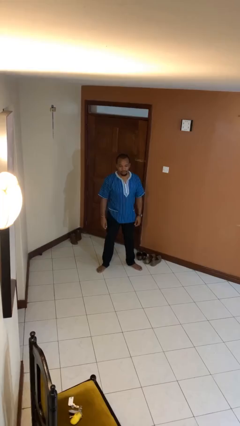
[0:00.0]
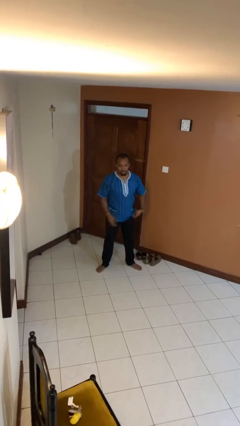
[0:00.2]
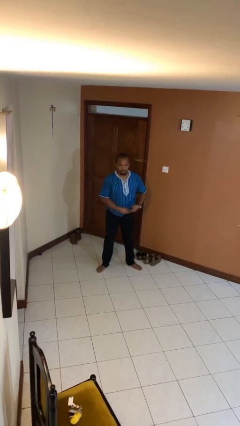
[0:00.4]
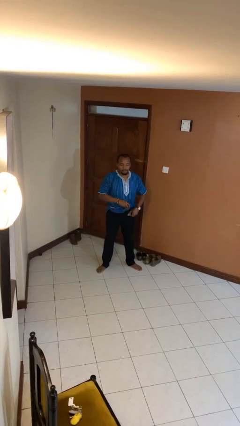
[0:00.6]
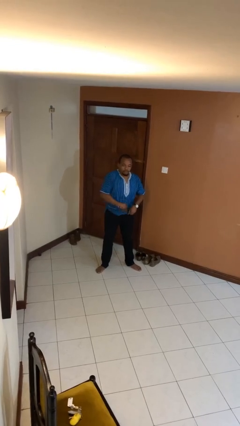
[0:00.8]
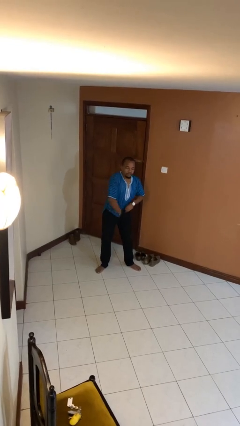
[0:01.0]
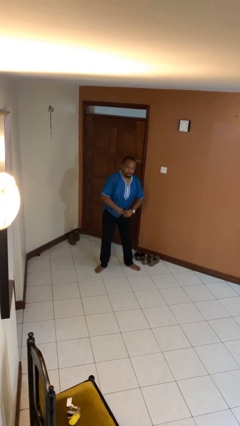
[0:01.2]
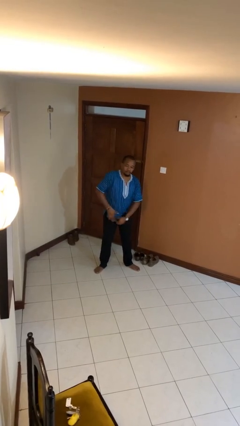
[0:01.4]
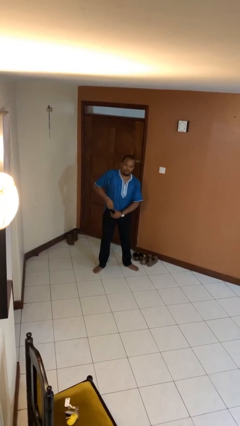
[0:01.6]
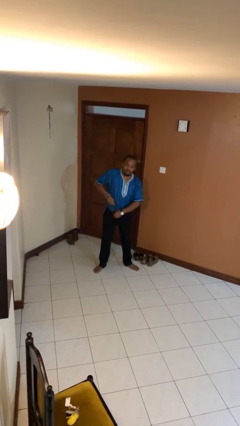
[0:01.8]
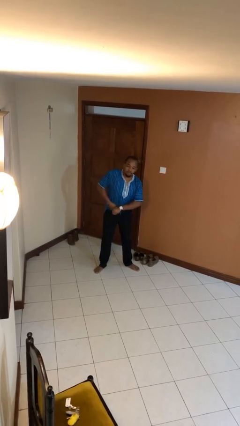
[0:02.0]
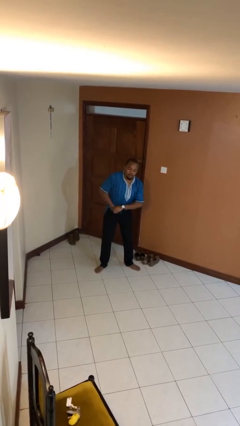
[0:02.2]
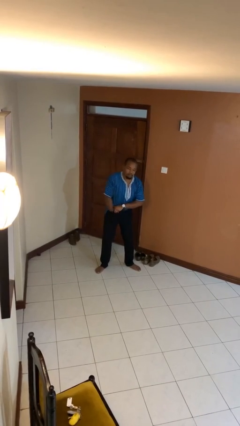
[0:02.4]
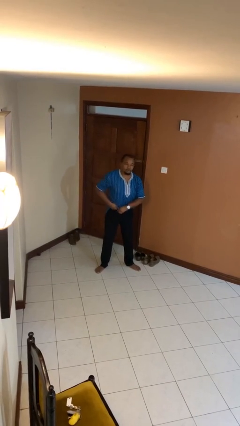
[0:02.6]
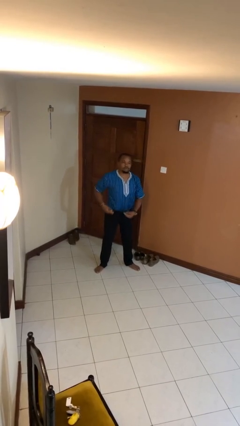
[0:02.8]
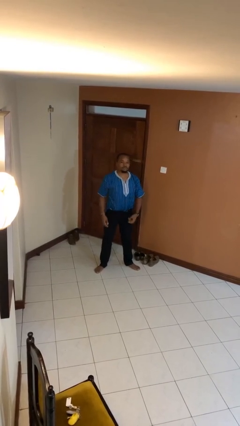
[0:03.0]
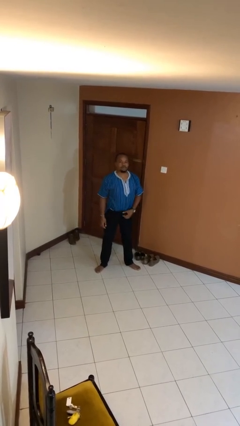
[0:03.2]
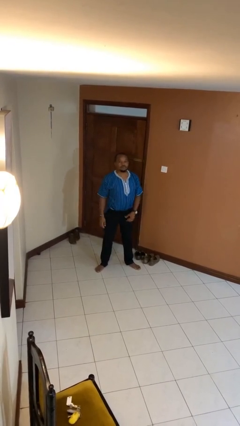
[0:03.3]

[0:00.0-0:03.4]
person tucks in shirt

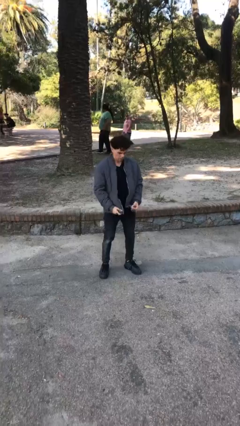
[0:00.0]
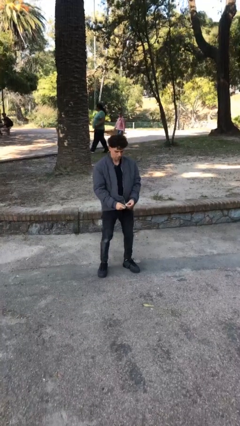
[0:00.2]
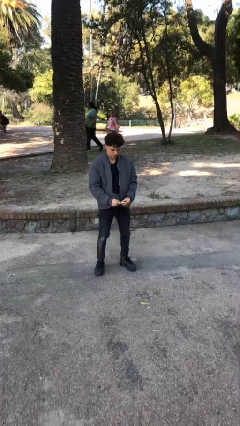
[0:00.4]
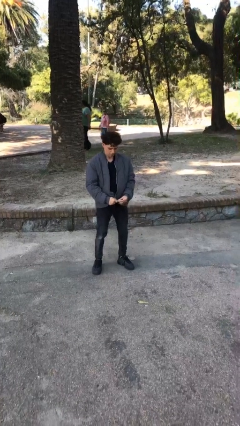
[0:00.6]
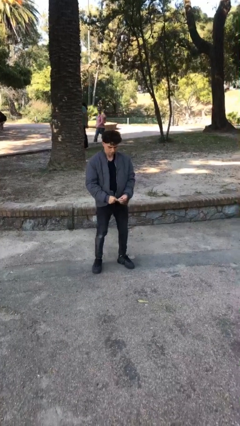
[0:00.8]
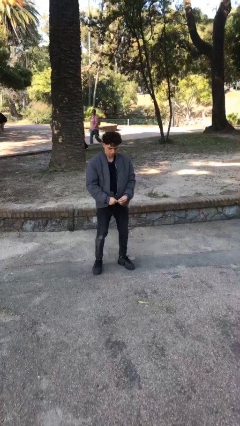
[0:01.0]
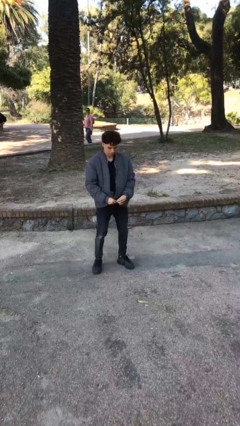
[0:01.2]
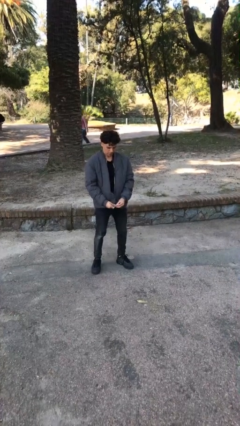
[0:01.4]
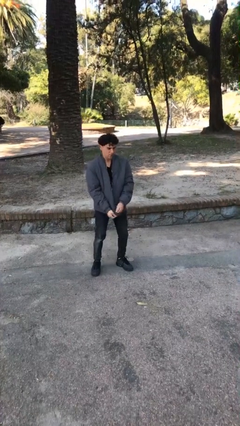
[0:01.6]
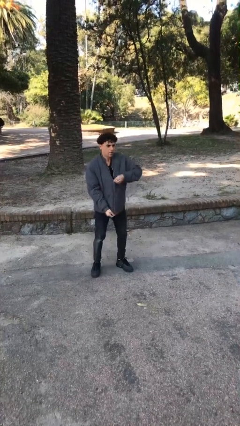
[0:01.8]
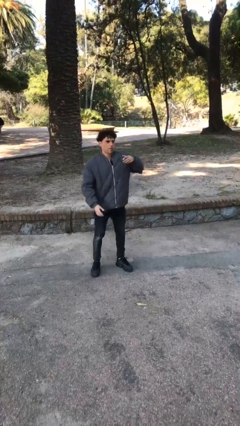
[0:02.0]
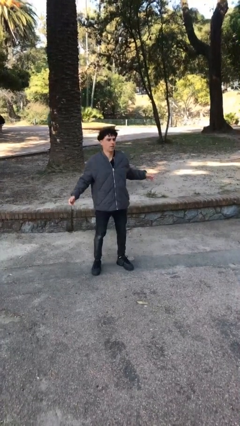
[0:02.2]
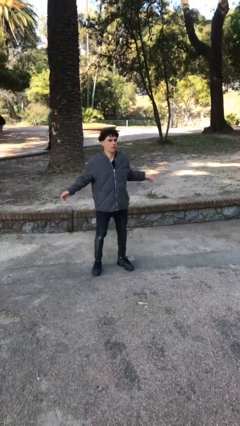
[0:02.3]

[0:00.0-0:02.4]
person zips up jacket

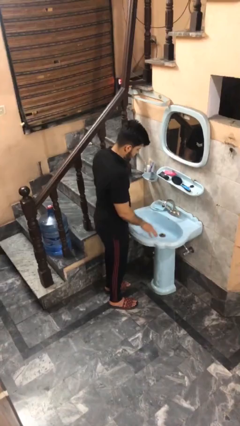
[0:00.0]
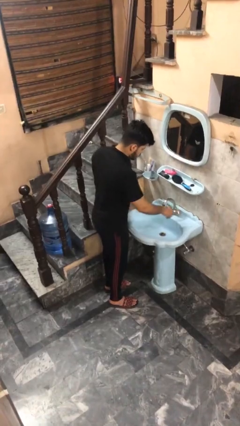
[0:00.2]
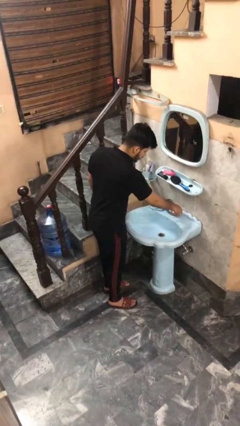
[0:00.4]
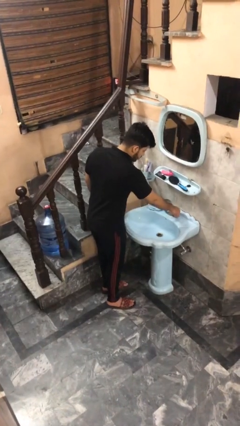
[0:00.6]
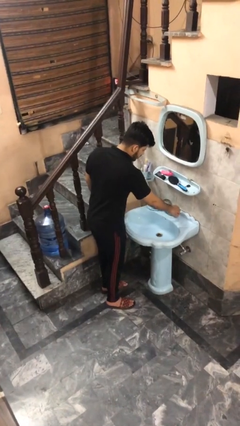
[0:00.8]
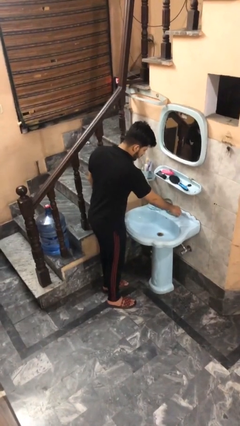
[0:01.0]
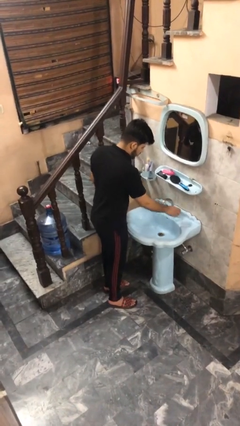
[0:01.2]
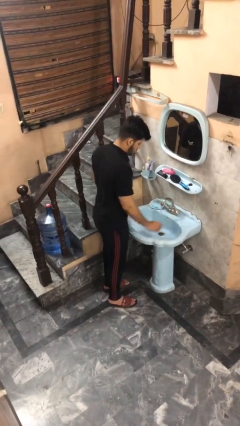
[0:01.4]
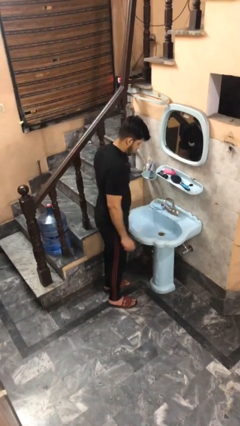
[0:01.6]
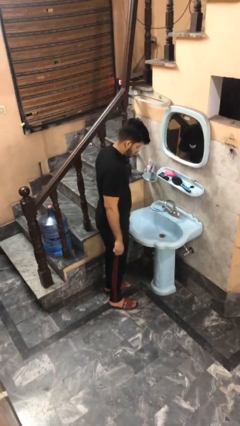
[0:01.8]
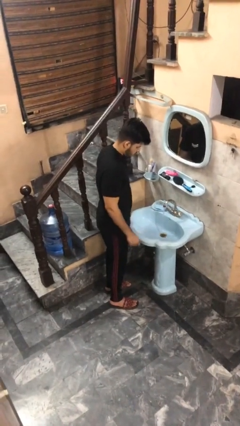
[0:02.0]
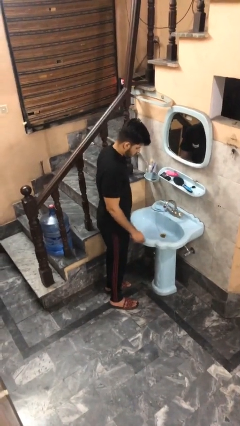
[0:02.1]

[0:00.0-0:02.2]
person turns on faucet

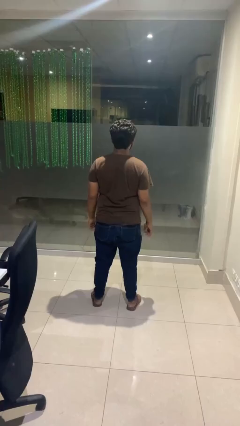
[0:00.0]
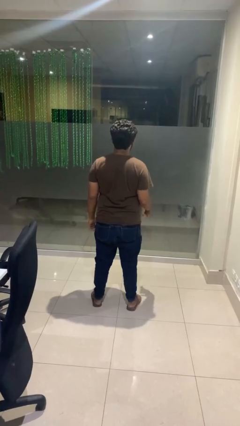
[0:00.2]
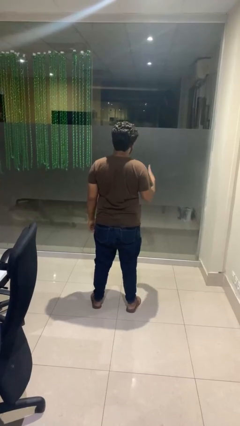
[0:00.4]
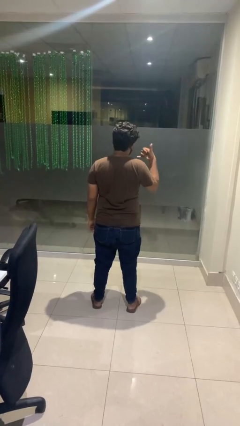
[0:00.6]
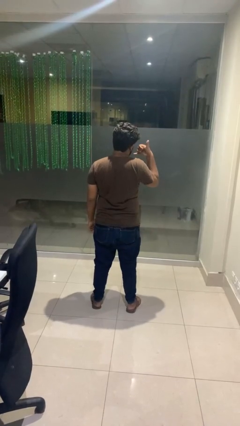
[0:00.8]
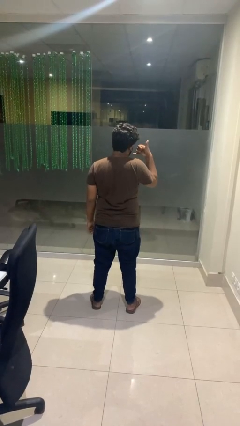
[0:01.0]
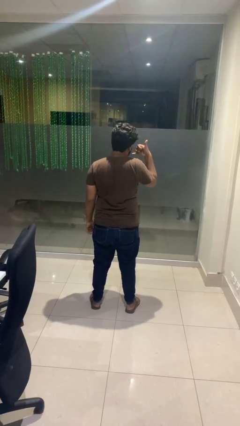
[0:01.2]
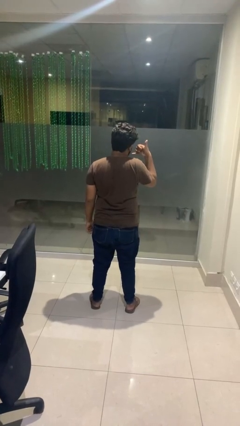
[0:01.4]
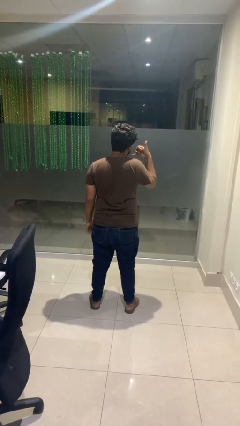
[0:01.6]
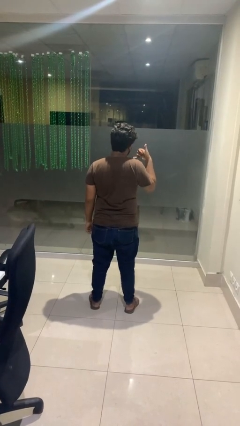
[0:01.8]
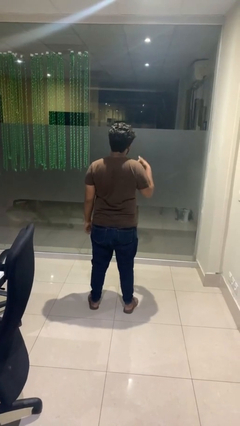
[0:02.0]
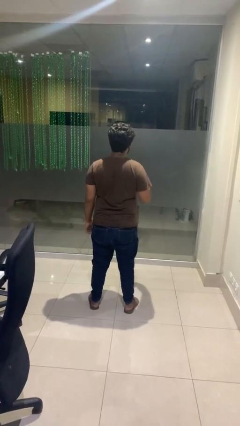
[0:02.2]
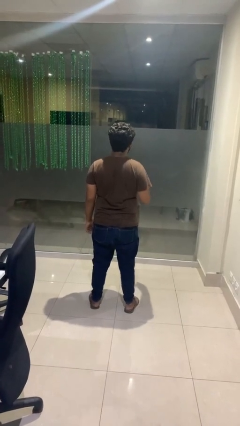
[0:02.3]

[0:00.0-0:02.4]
person gestures call me

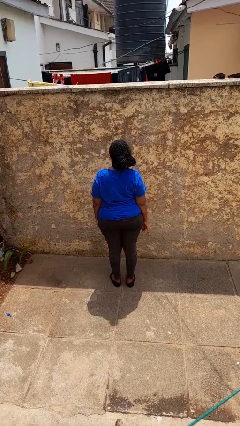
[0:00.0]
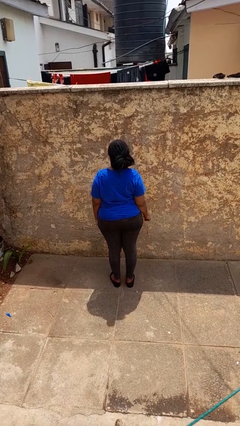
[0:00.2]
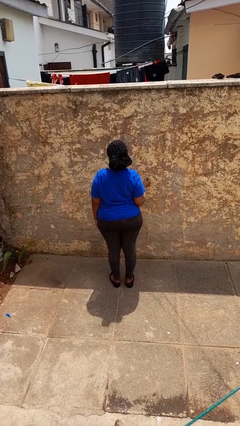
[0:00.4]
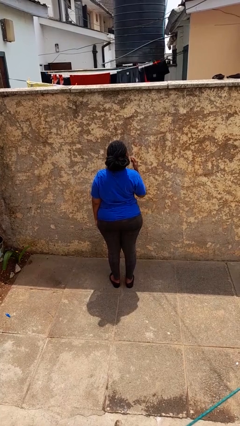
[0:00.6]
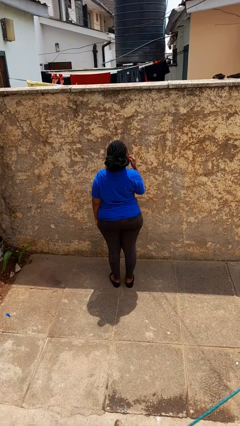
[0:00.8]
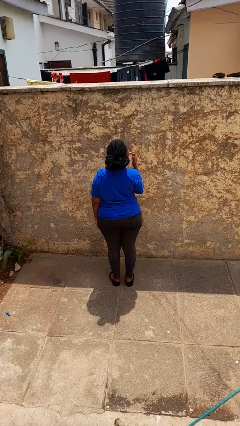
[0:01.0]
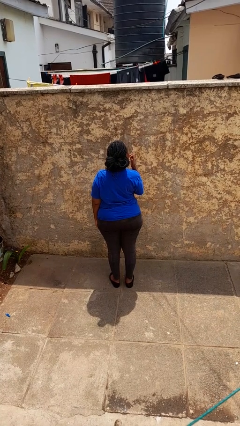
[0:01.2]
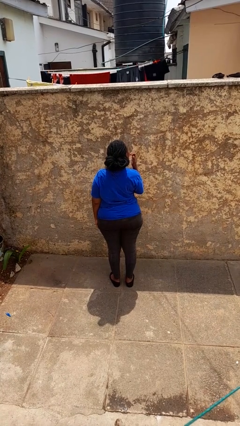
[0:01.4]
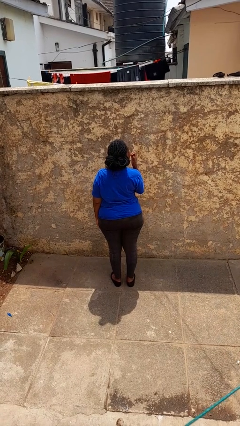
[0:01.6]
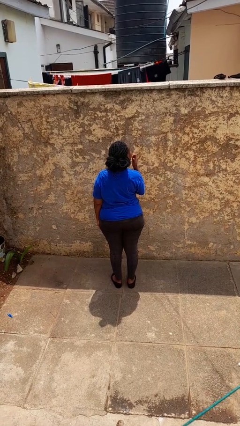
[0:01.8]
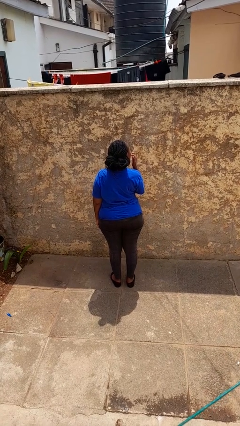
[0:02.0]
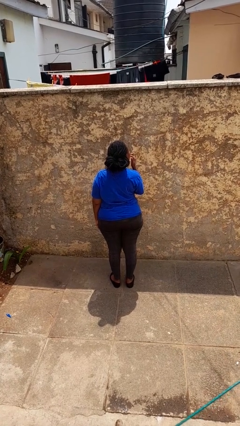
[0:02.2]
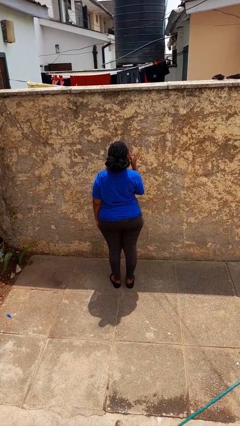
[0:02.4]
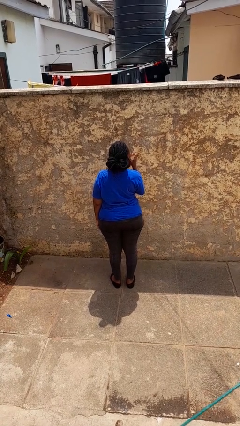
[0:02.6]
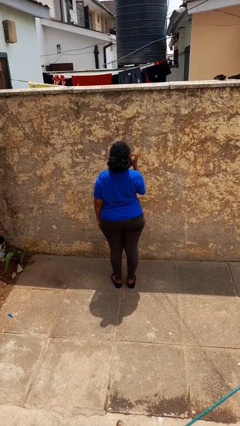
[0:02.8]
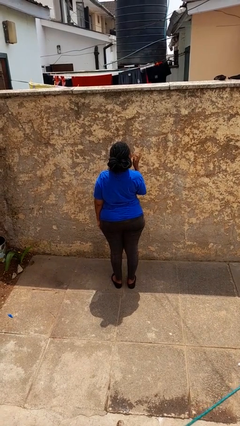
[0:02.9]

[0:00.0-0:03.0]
person licks fingers

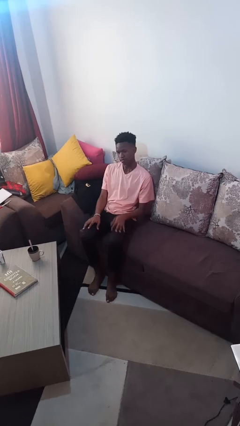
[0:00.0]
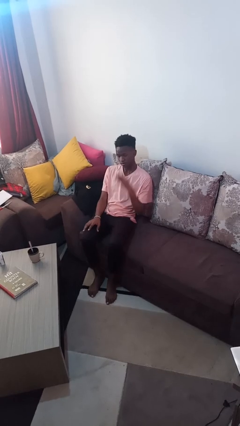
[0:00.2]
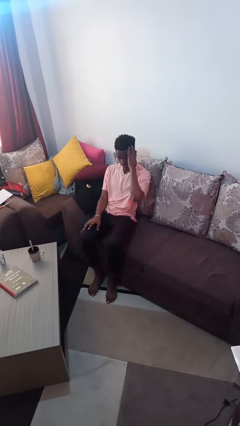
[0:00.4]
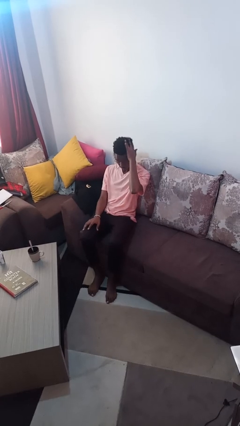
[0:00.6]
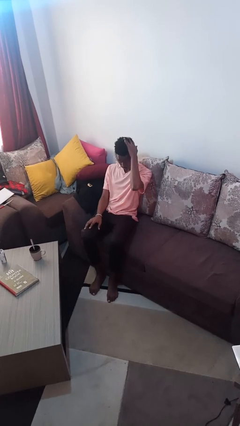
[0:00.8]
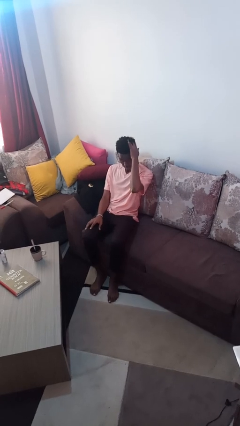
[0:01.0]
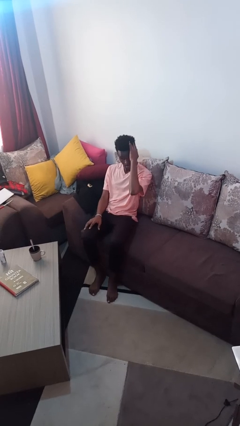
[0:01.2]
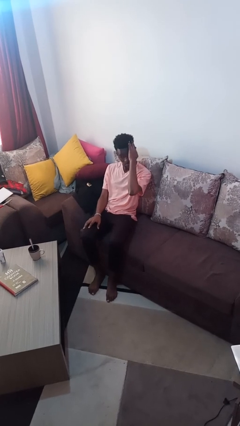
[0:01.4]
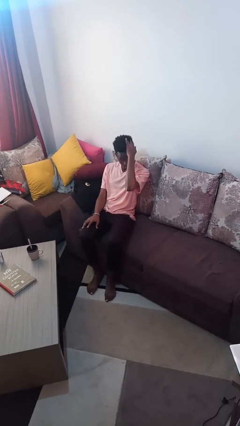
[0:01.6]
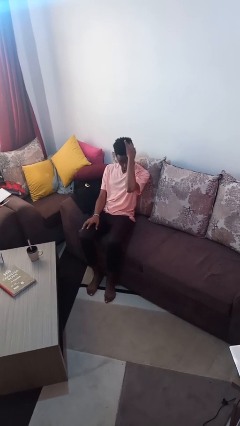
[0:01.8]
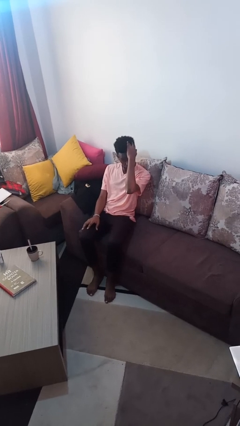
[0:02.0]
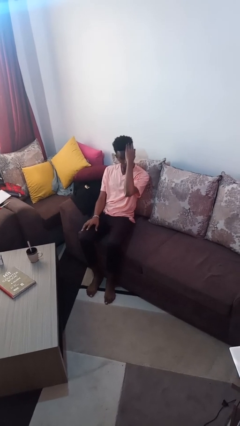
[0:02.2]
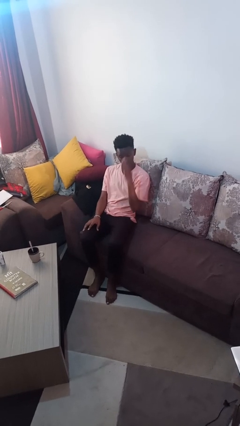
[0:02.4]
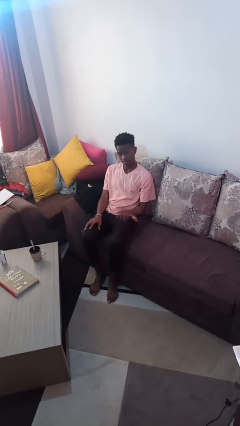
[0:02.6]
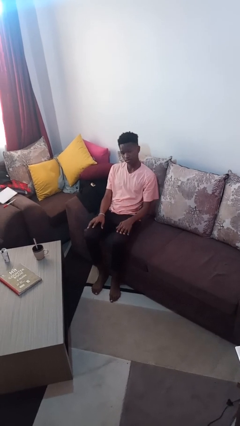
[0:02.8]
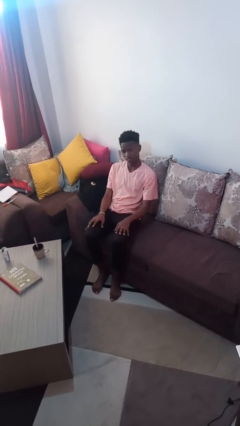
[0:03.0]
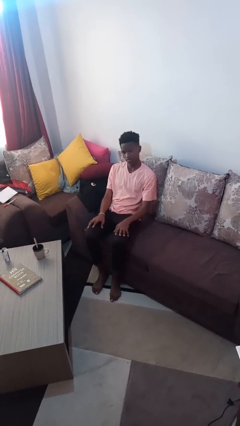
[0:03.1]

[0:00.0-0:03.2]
person strokes hair

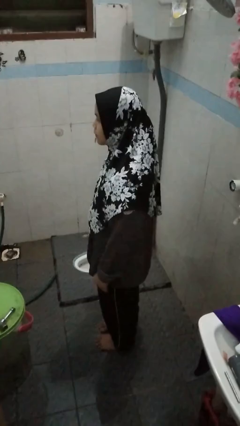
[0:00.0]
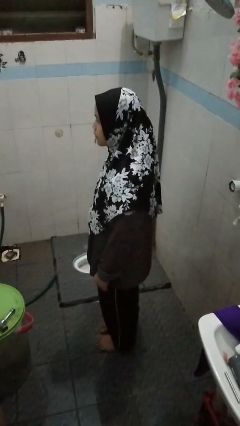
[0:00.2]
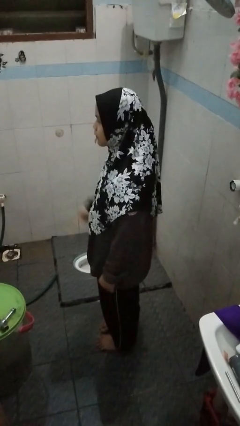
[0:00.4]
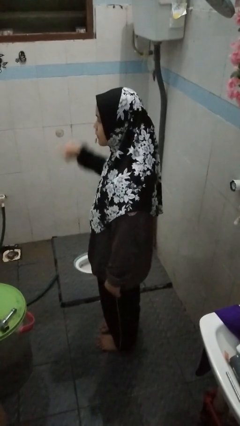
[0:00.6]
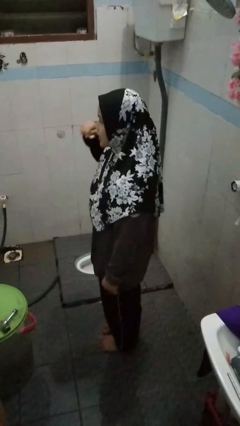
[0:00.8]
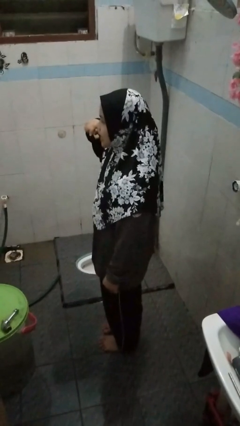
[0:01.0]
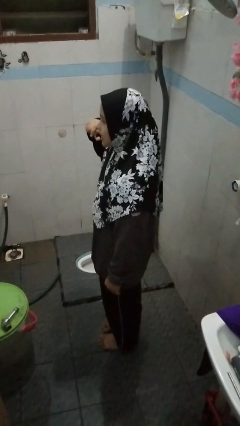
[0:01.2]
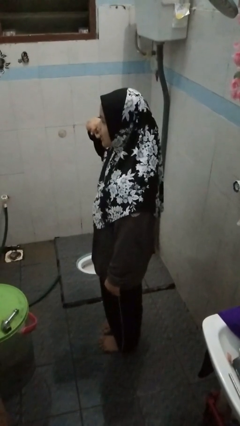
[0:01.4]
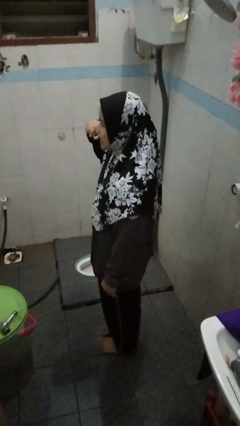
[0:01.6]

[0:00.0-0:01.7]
person brushes teeth
